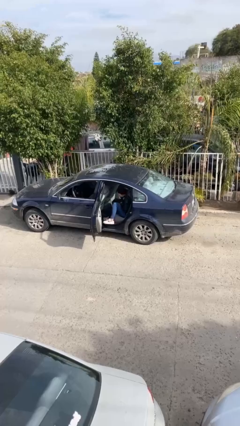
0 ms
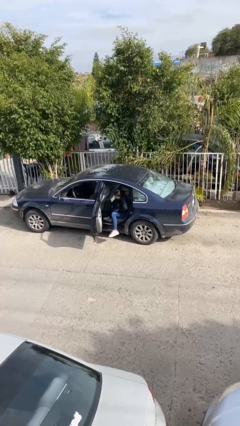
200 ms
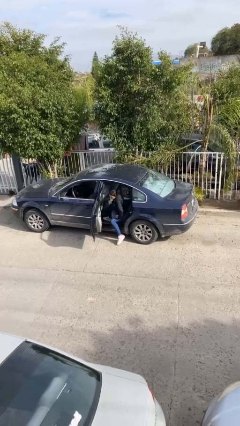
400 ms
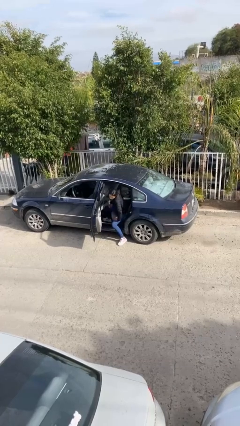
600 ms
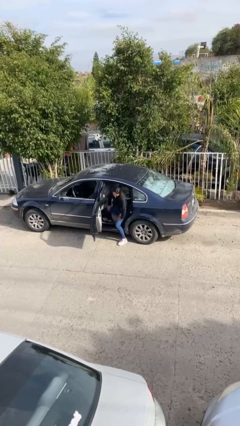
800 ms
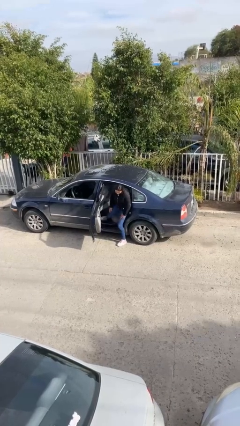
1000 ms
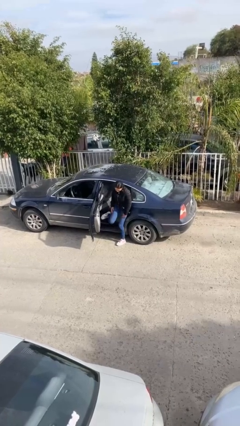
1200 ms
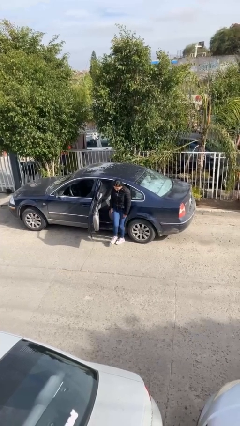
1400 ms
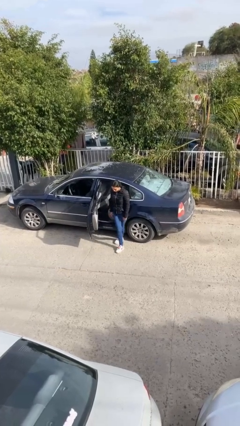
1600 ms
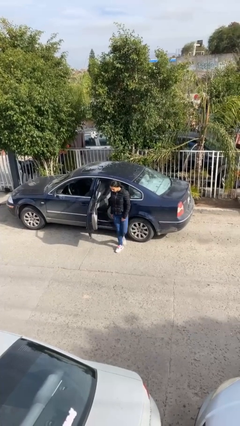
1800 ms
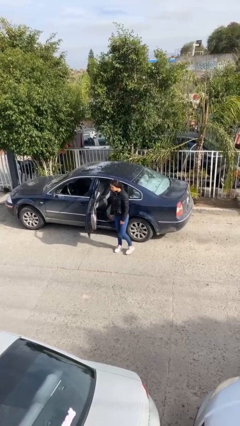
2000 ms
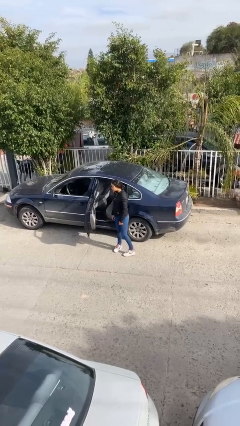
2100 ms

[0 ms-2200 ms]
person exits car

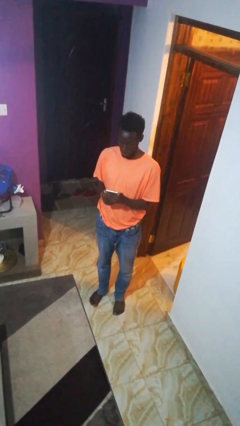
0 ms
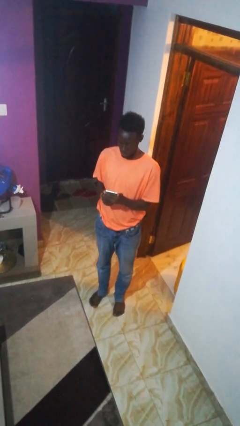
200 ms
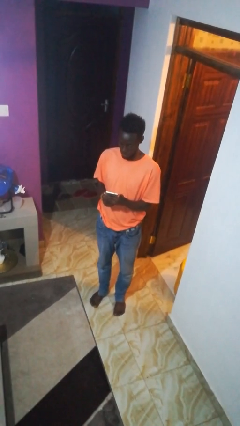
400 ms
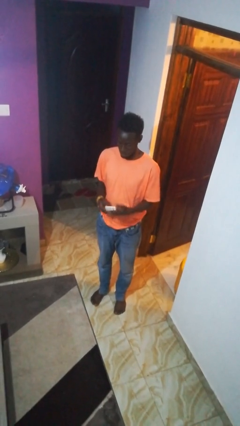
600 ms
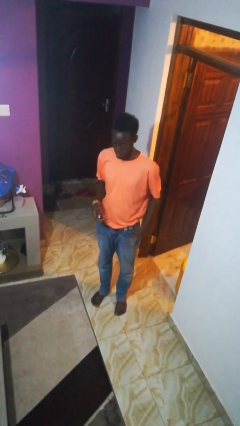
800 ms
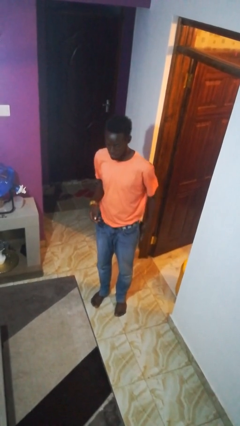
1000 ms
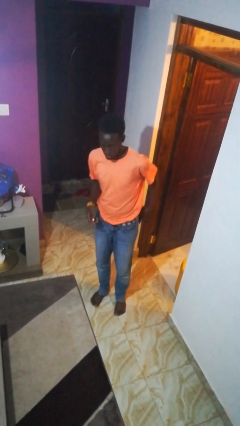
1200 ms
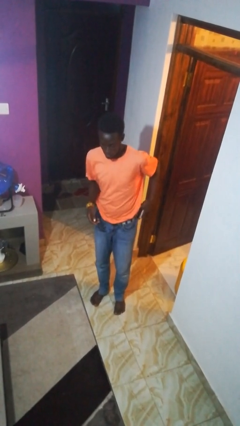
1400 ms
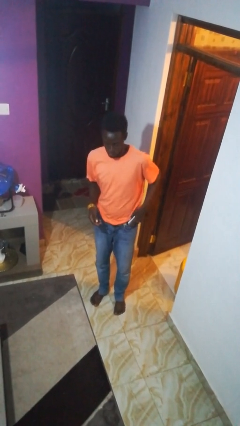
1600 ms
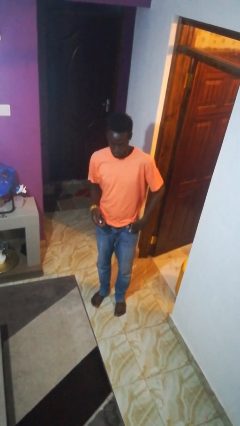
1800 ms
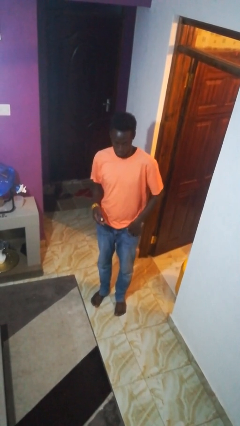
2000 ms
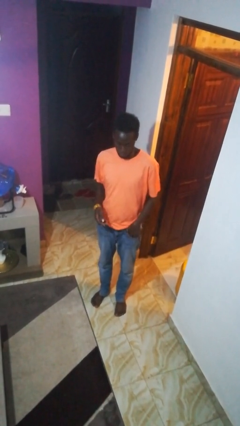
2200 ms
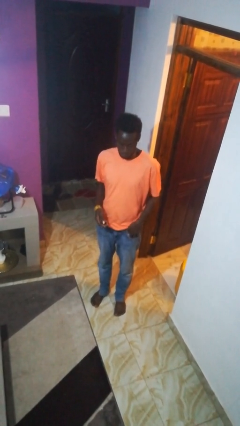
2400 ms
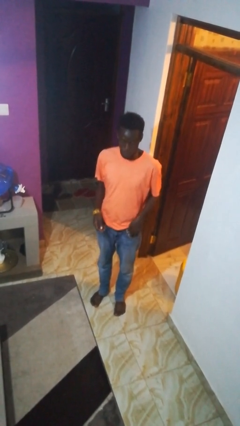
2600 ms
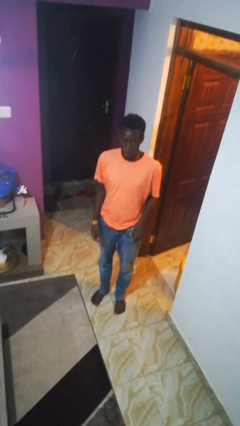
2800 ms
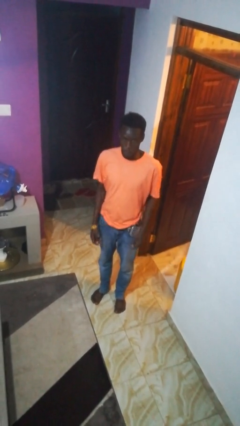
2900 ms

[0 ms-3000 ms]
person puts phone into pocket

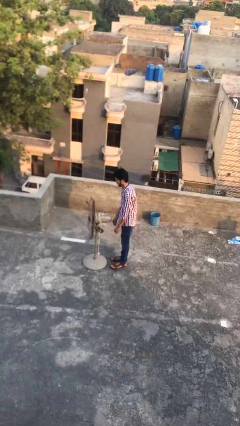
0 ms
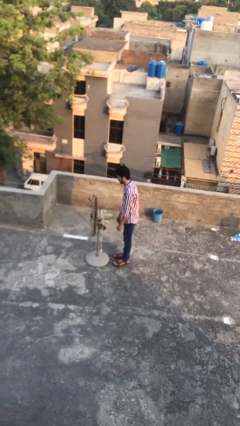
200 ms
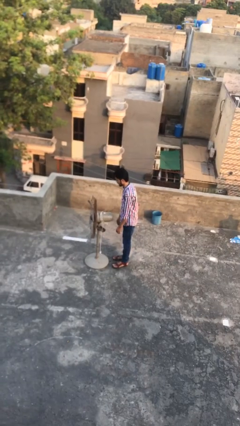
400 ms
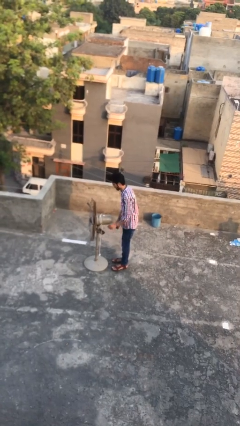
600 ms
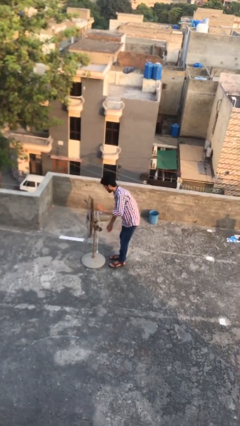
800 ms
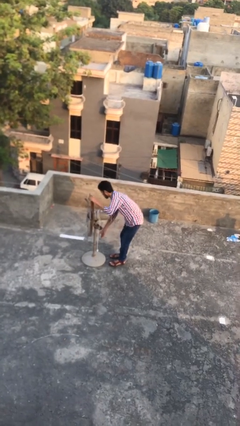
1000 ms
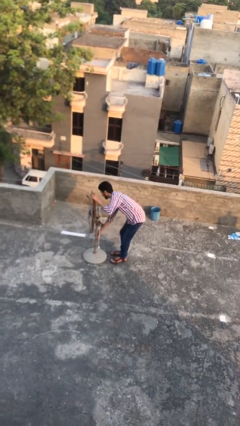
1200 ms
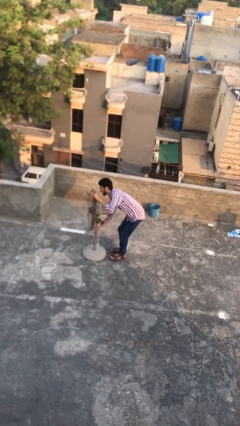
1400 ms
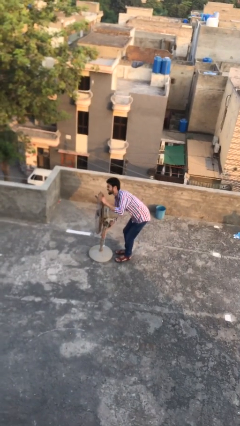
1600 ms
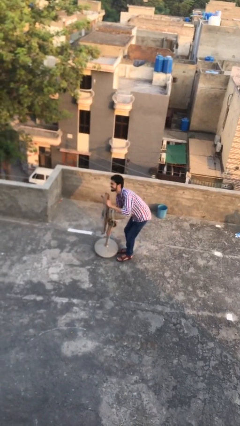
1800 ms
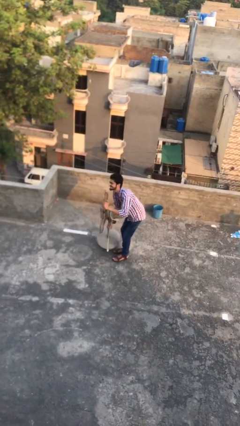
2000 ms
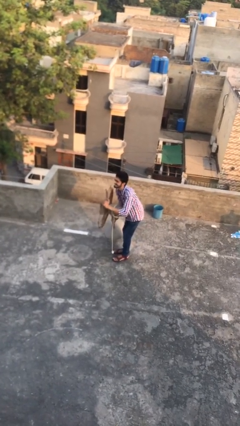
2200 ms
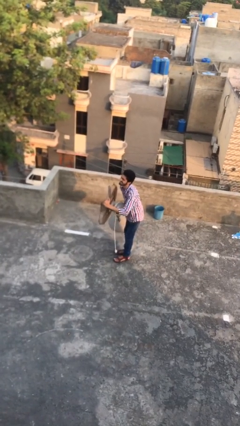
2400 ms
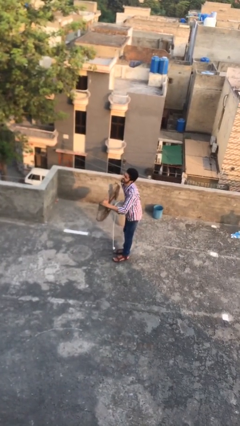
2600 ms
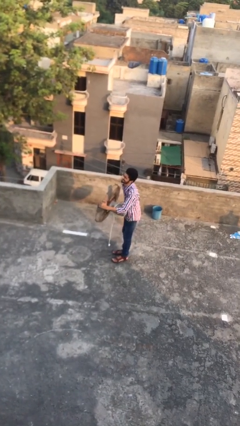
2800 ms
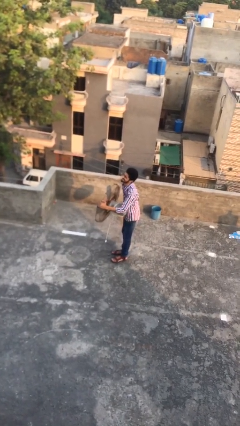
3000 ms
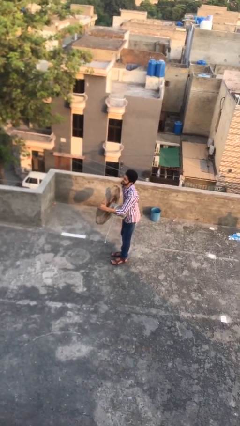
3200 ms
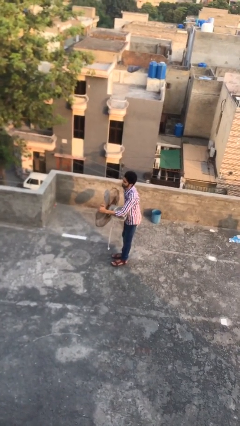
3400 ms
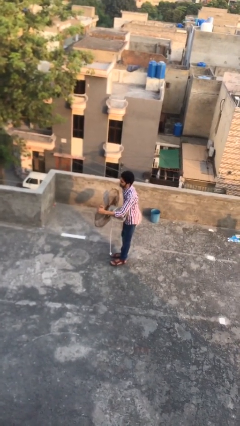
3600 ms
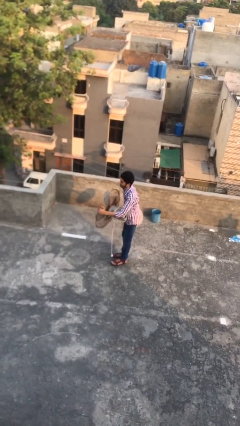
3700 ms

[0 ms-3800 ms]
person picks up object from floor

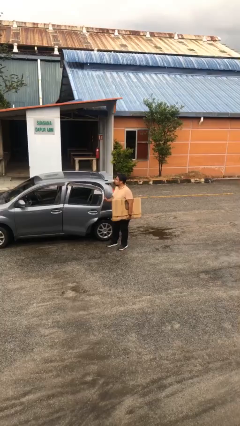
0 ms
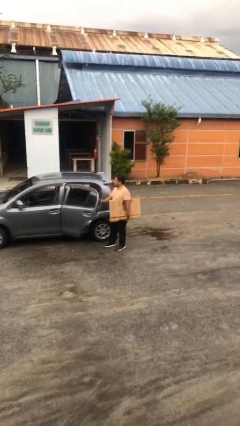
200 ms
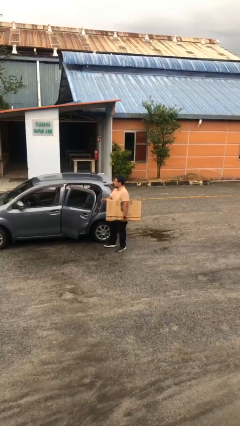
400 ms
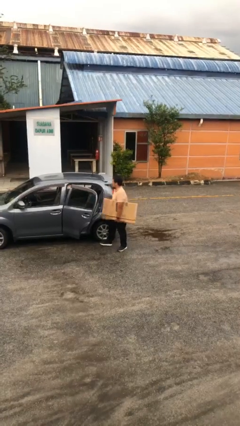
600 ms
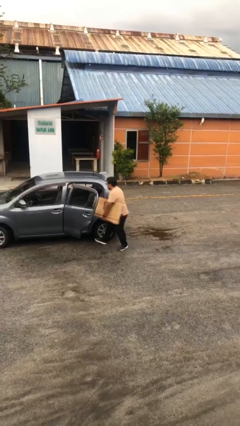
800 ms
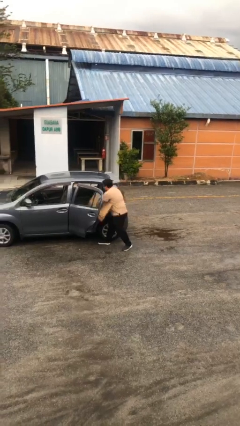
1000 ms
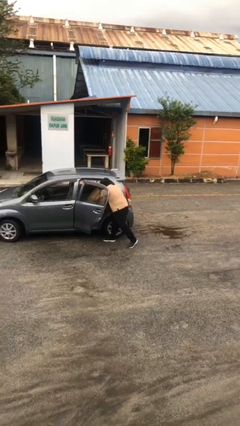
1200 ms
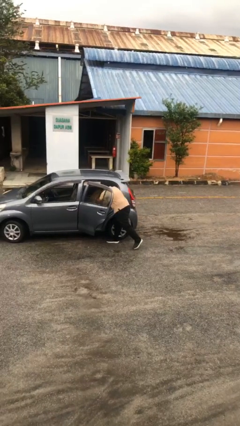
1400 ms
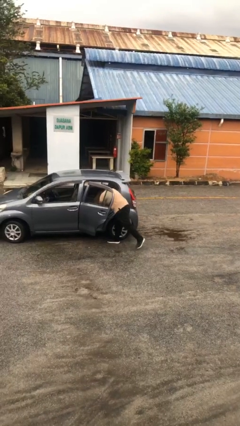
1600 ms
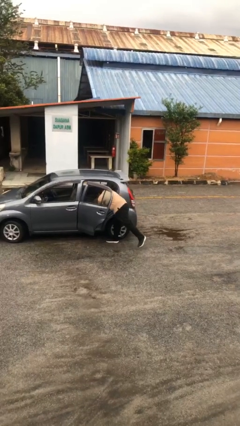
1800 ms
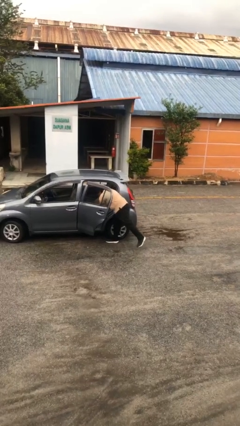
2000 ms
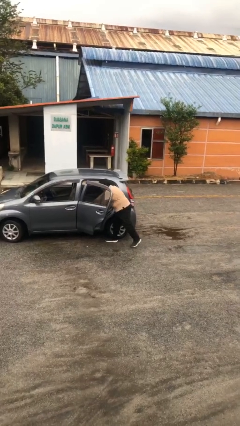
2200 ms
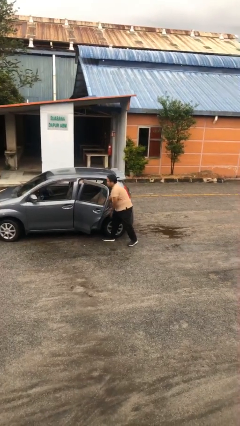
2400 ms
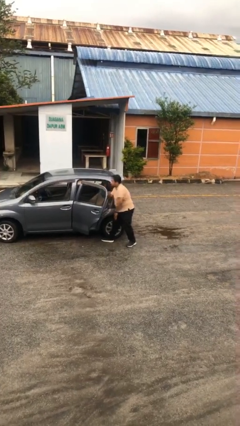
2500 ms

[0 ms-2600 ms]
person loads car

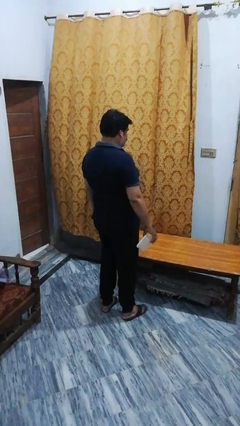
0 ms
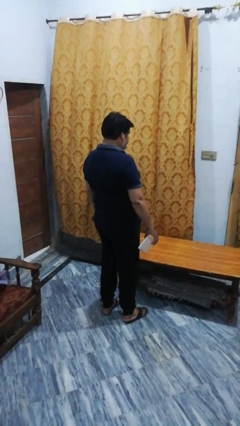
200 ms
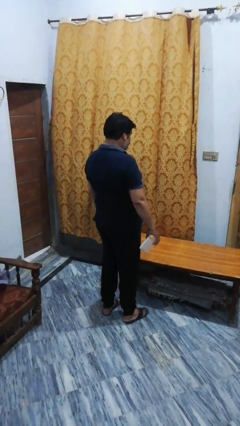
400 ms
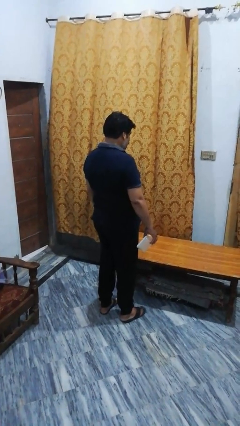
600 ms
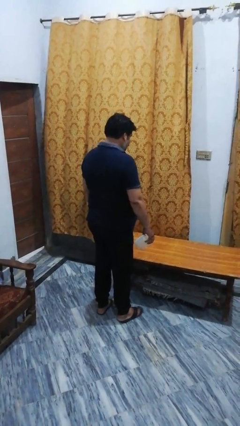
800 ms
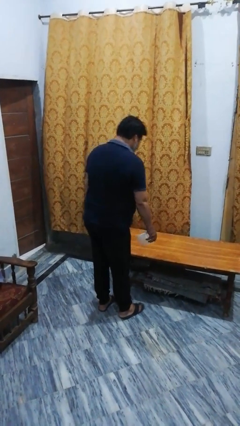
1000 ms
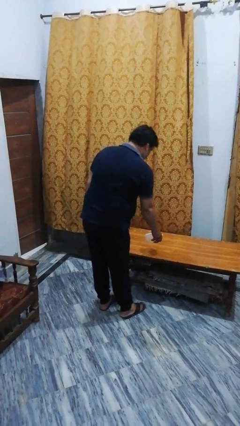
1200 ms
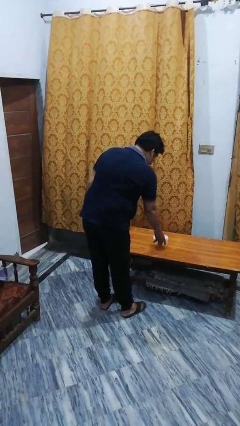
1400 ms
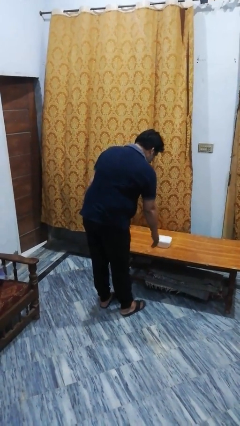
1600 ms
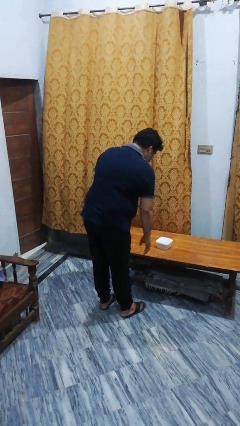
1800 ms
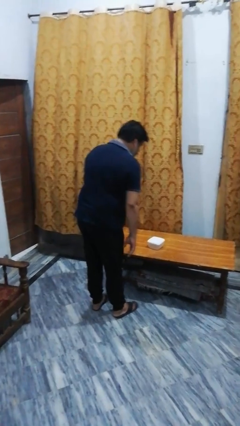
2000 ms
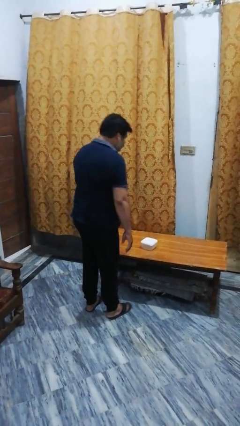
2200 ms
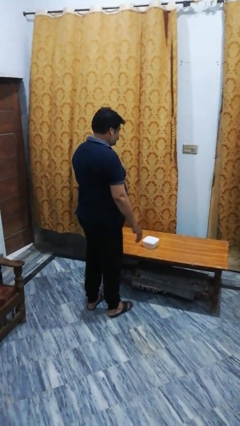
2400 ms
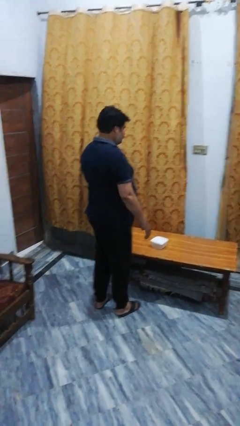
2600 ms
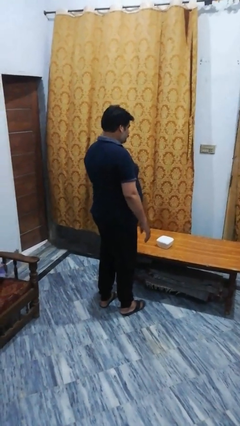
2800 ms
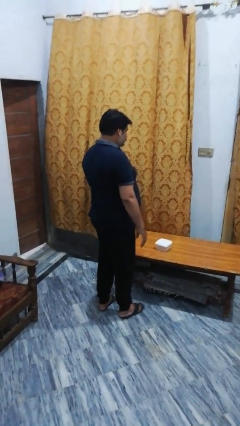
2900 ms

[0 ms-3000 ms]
person throws object on table

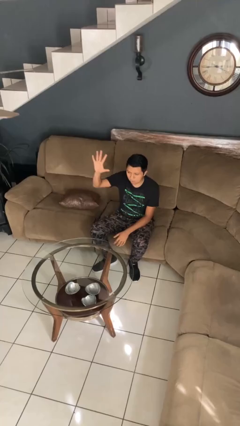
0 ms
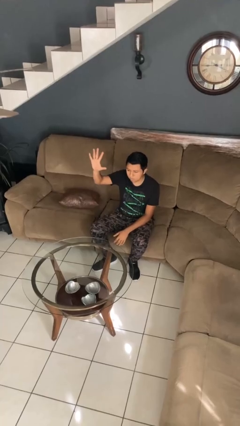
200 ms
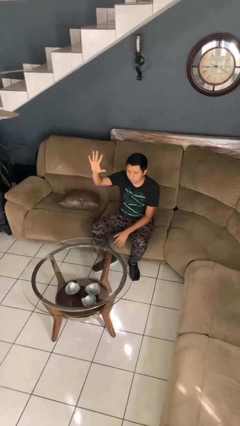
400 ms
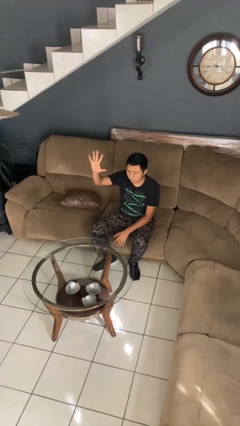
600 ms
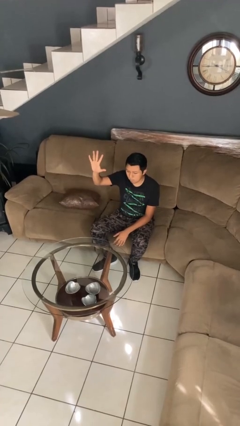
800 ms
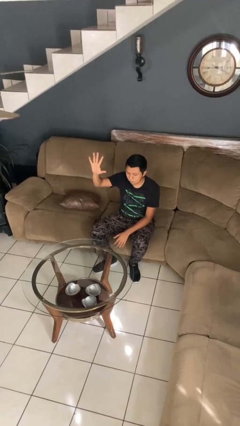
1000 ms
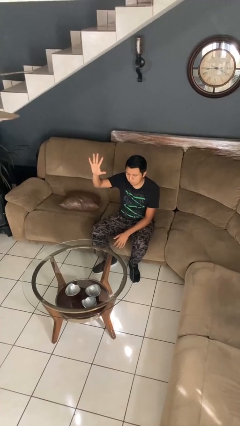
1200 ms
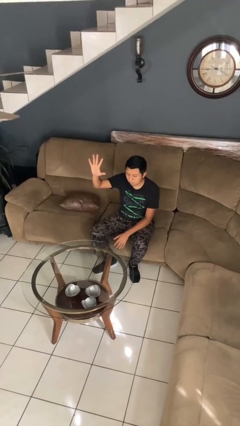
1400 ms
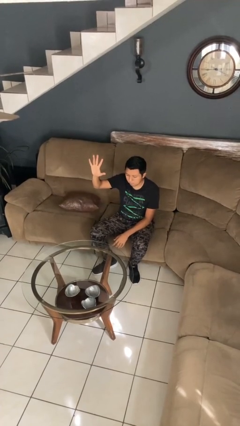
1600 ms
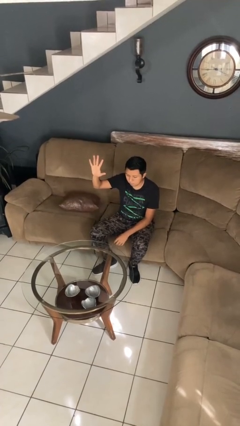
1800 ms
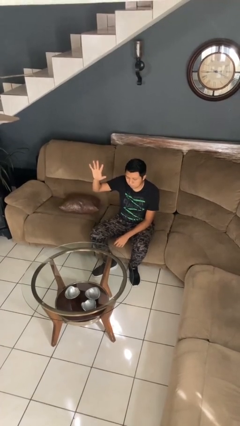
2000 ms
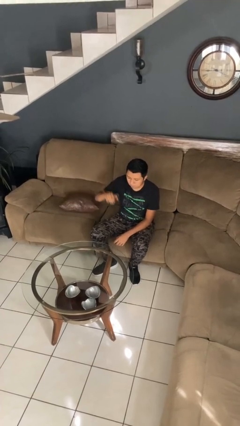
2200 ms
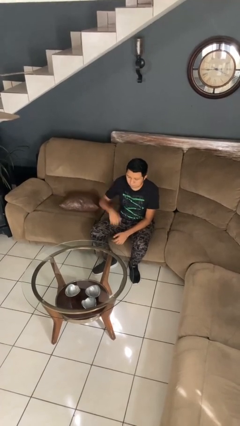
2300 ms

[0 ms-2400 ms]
person gestures number five

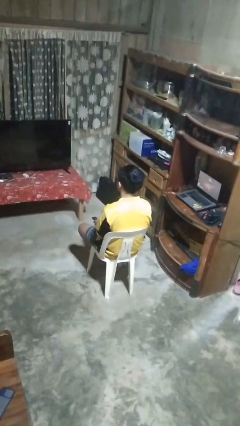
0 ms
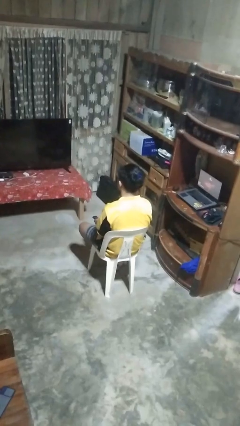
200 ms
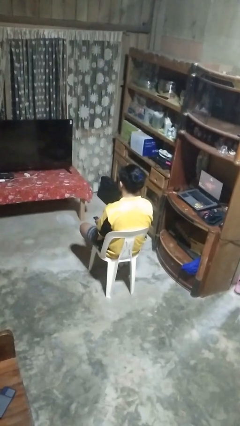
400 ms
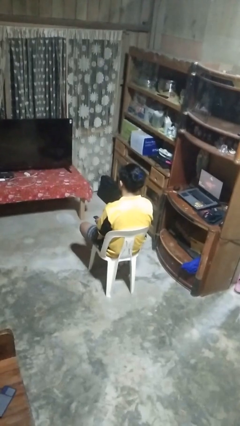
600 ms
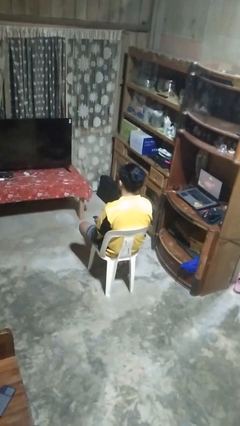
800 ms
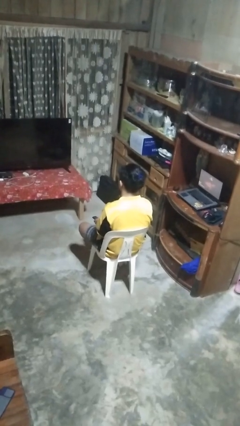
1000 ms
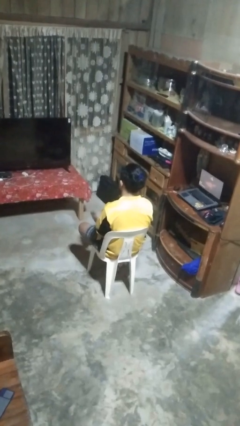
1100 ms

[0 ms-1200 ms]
person uses television remote
